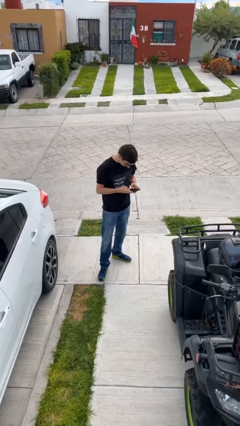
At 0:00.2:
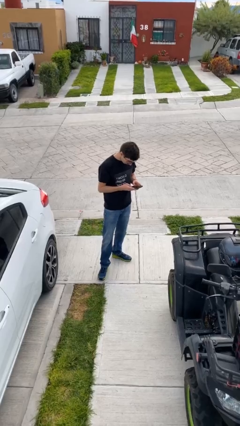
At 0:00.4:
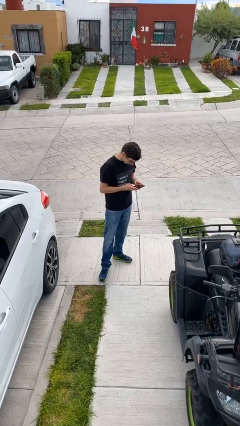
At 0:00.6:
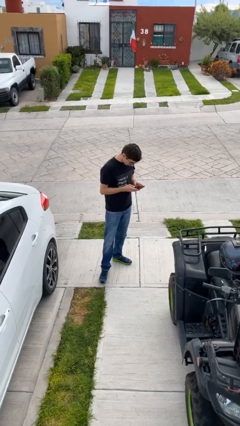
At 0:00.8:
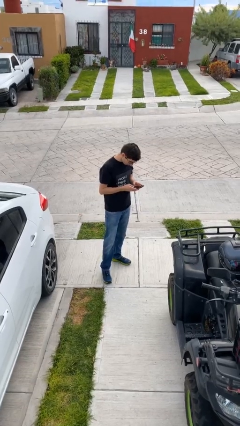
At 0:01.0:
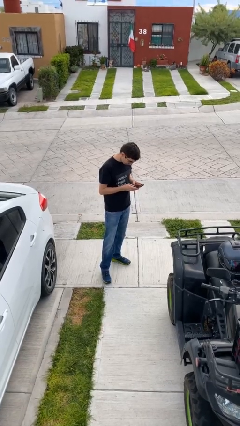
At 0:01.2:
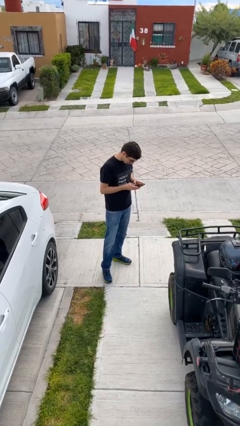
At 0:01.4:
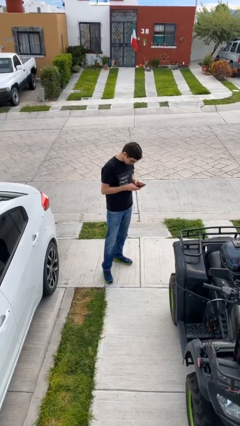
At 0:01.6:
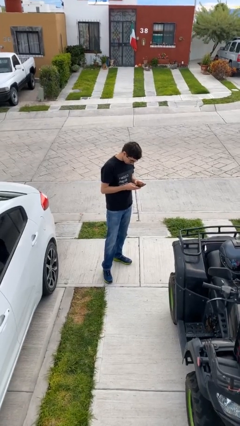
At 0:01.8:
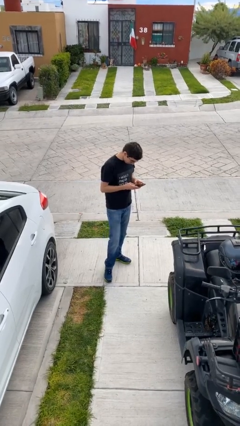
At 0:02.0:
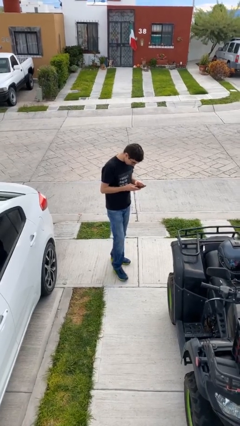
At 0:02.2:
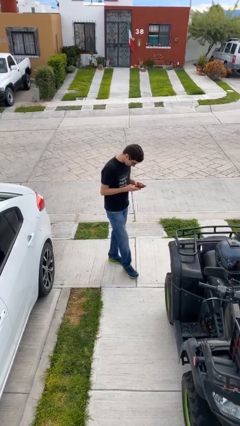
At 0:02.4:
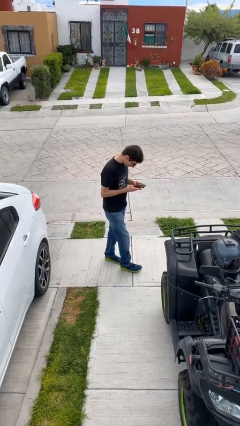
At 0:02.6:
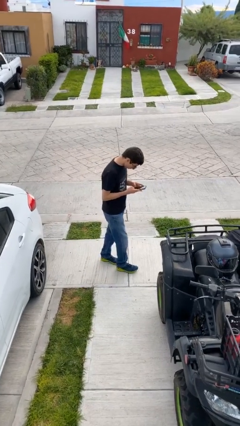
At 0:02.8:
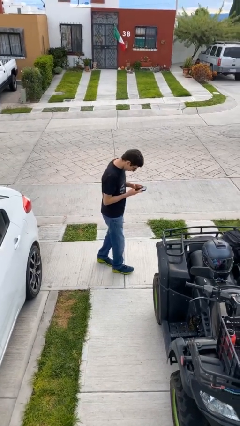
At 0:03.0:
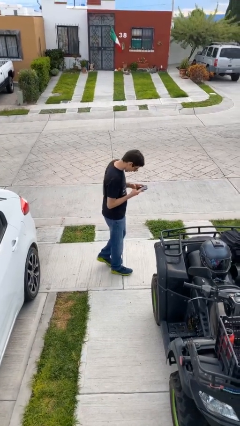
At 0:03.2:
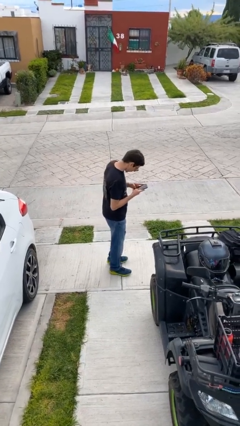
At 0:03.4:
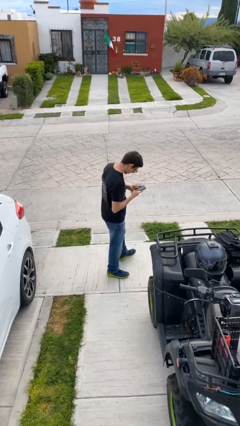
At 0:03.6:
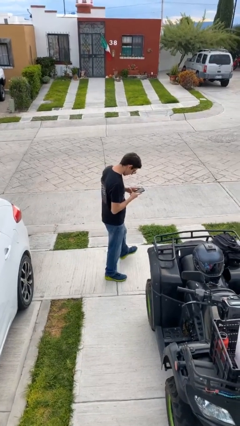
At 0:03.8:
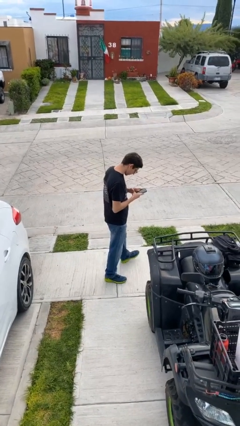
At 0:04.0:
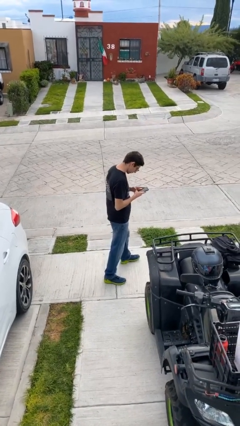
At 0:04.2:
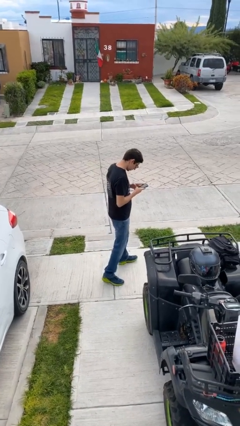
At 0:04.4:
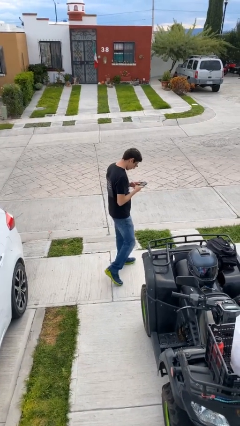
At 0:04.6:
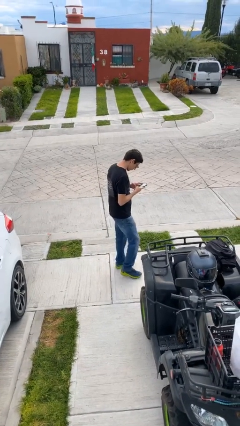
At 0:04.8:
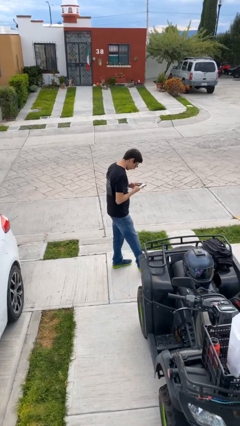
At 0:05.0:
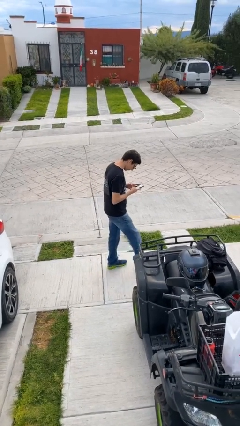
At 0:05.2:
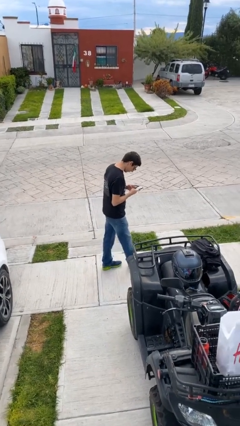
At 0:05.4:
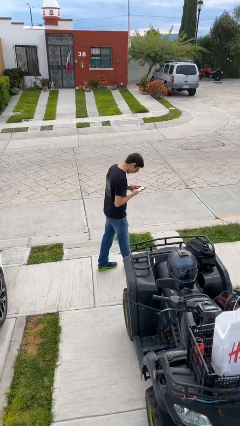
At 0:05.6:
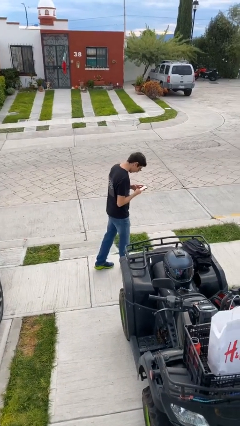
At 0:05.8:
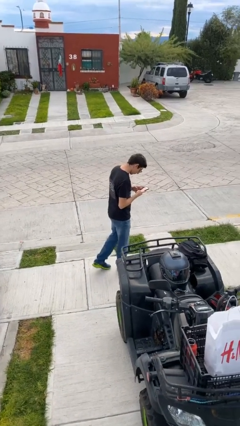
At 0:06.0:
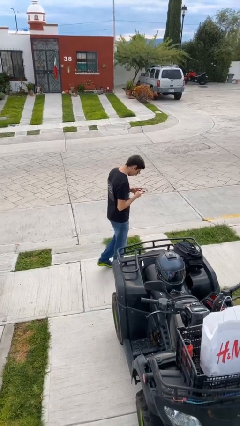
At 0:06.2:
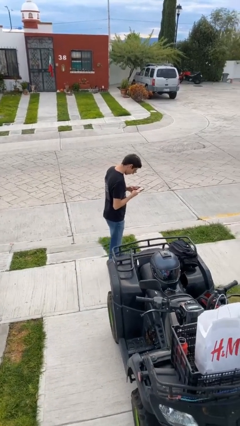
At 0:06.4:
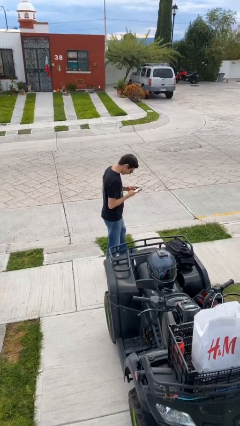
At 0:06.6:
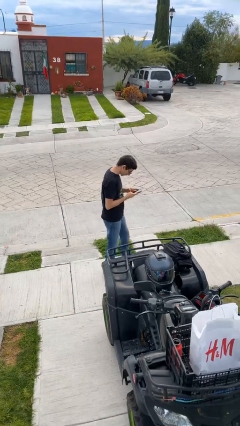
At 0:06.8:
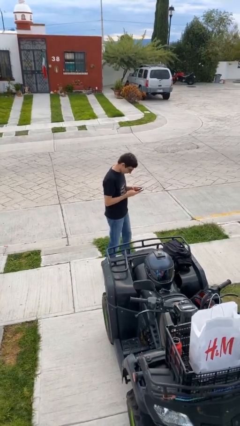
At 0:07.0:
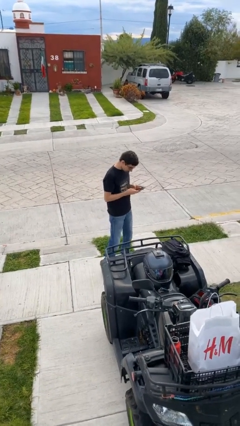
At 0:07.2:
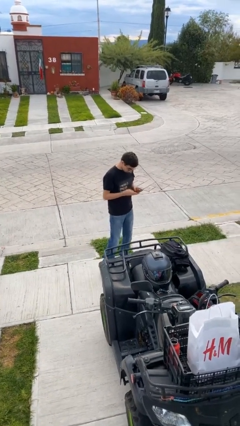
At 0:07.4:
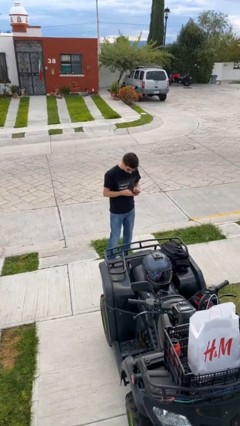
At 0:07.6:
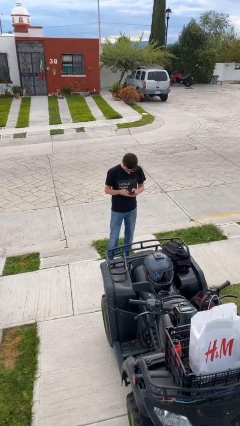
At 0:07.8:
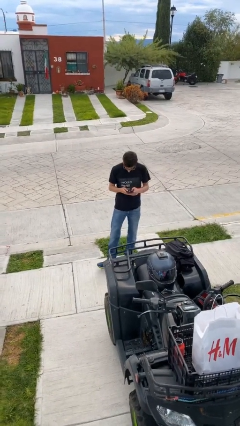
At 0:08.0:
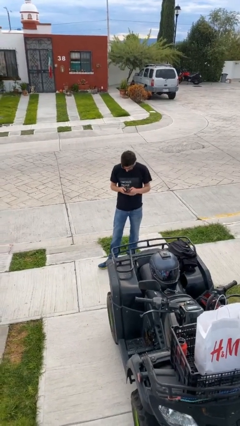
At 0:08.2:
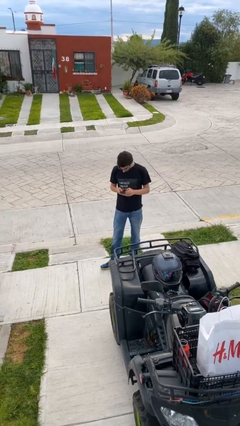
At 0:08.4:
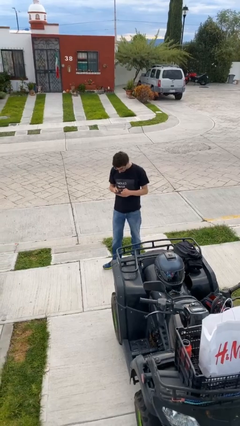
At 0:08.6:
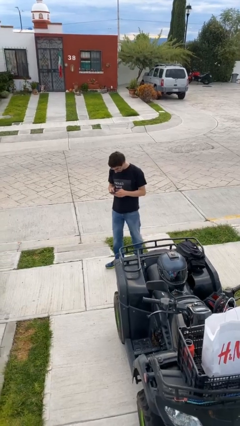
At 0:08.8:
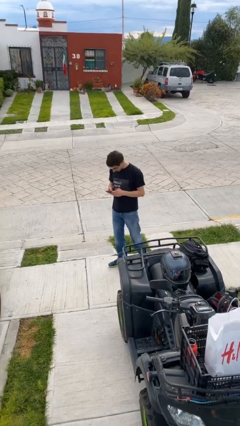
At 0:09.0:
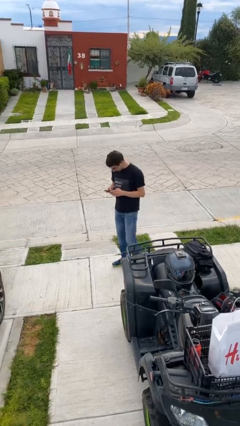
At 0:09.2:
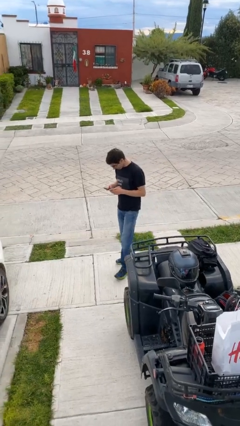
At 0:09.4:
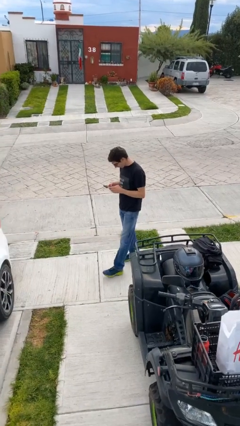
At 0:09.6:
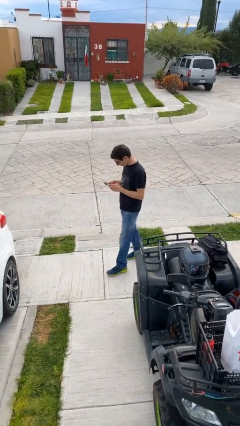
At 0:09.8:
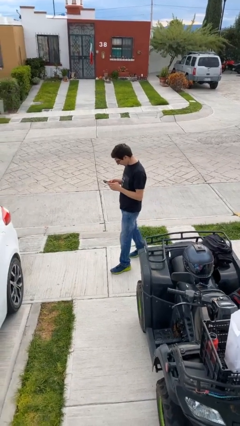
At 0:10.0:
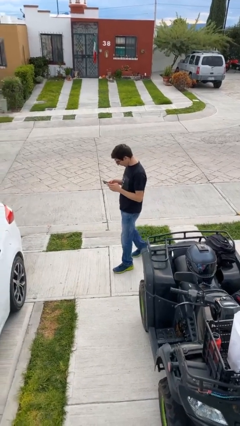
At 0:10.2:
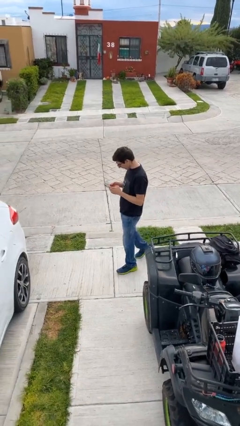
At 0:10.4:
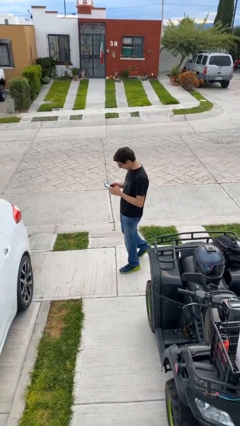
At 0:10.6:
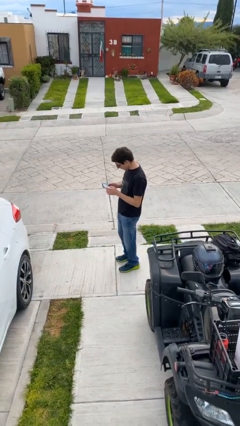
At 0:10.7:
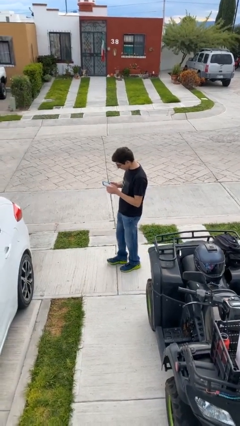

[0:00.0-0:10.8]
person texts on phone

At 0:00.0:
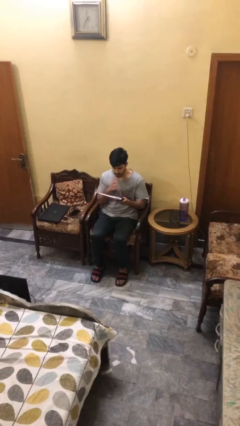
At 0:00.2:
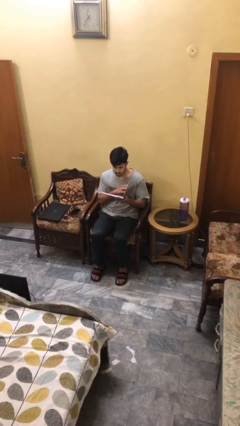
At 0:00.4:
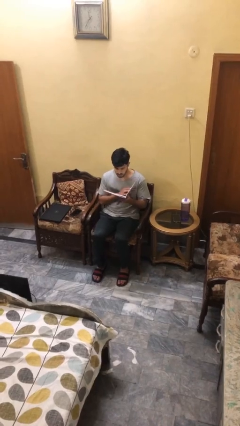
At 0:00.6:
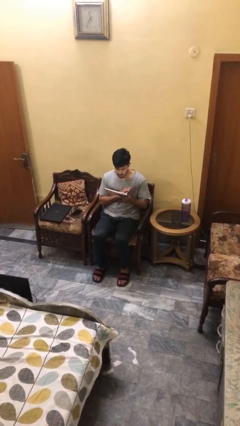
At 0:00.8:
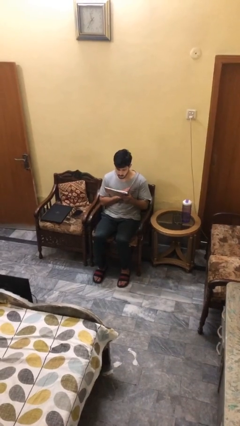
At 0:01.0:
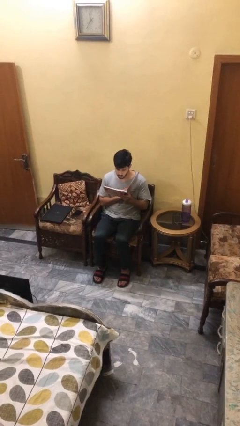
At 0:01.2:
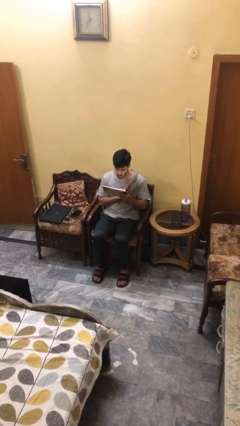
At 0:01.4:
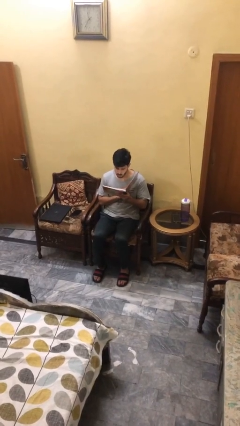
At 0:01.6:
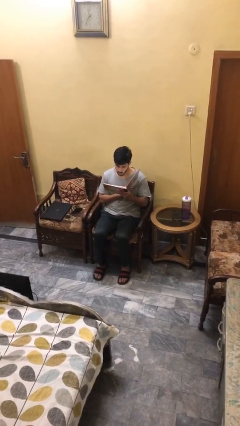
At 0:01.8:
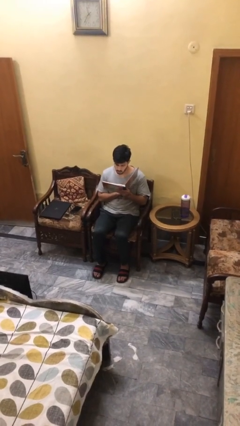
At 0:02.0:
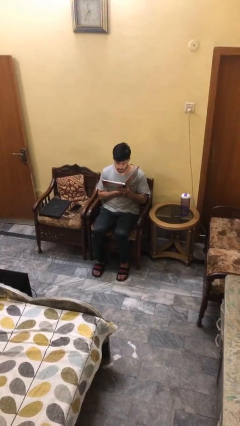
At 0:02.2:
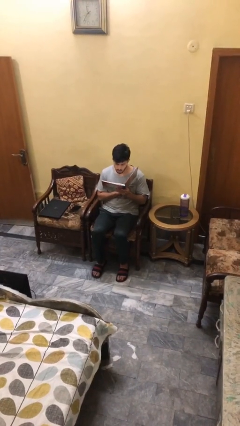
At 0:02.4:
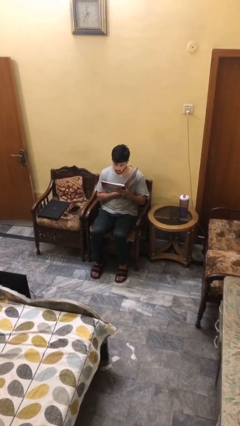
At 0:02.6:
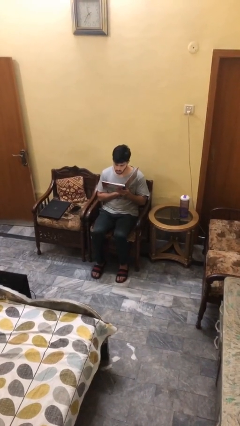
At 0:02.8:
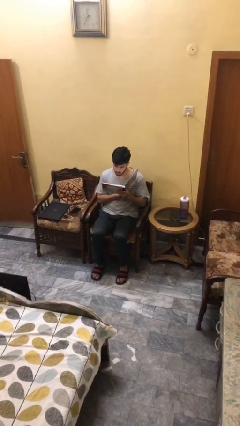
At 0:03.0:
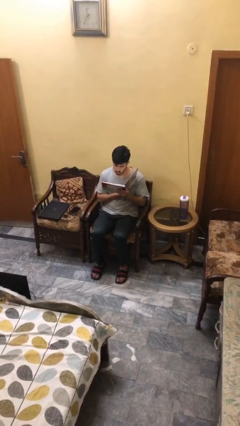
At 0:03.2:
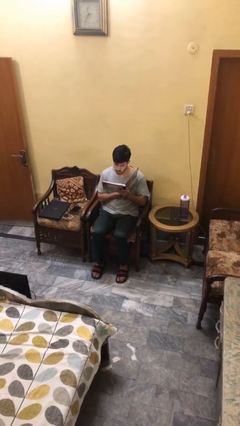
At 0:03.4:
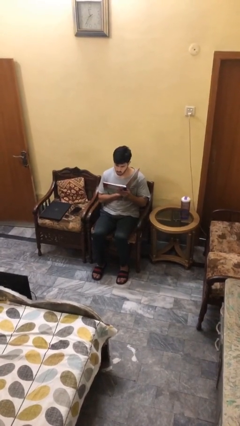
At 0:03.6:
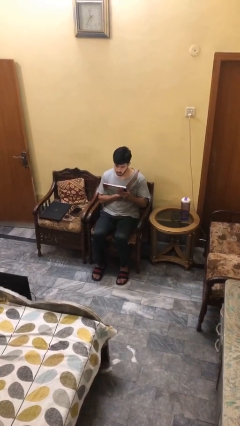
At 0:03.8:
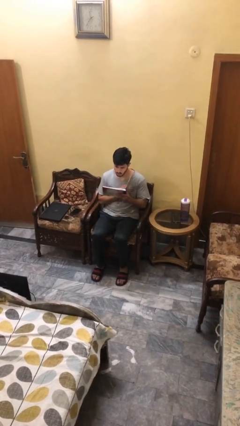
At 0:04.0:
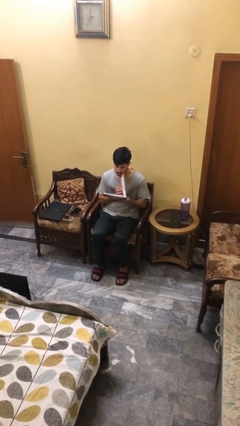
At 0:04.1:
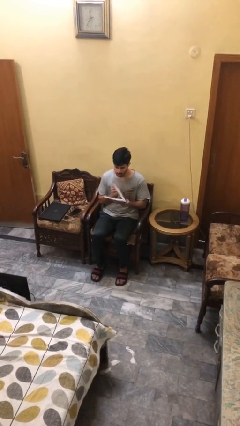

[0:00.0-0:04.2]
person reads document

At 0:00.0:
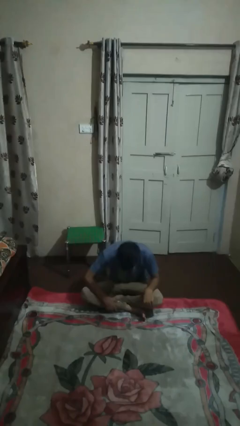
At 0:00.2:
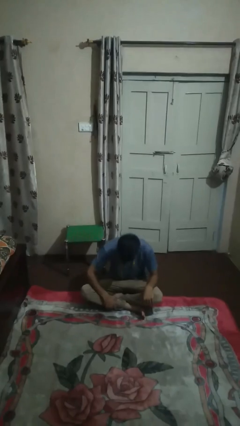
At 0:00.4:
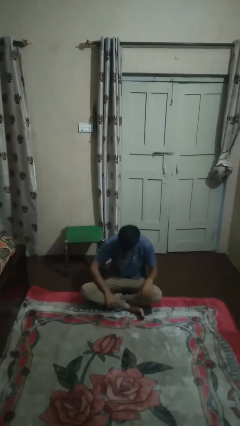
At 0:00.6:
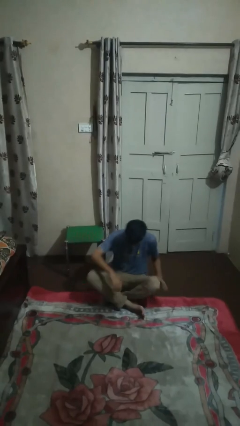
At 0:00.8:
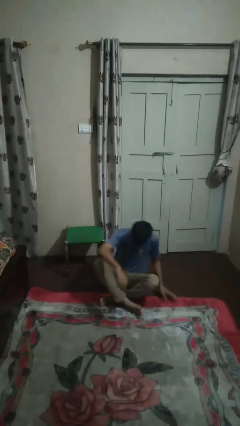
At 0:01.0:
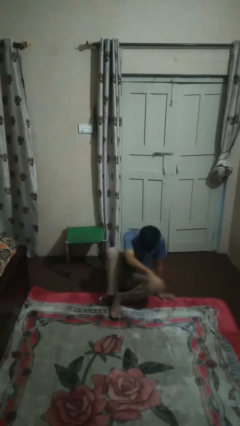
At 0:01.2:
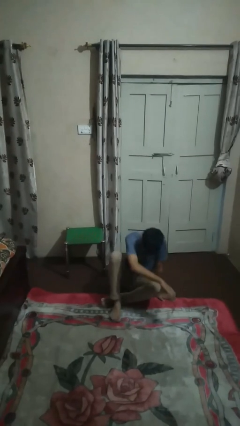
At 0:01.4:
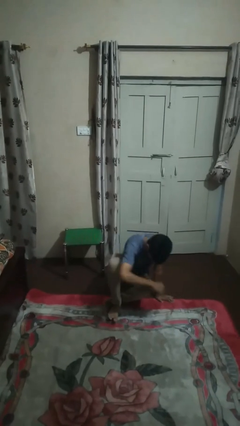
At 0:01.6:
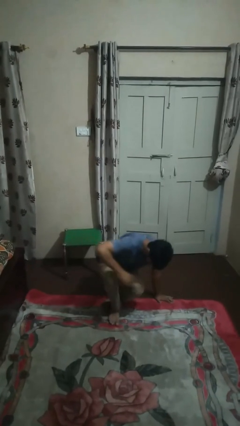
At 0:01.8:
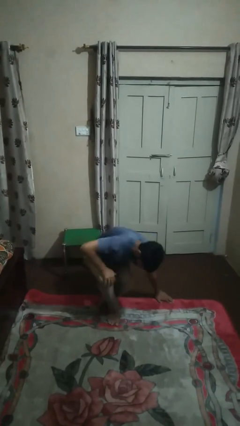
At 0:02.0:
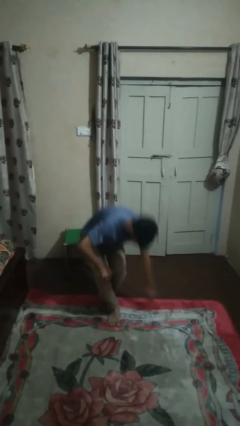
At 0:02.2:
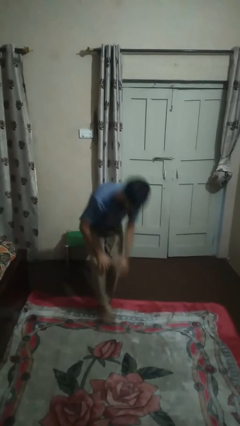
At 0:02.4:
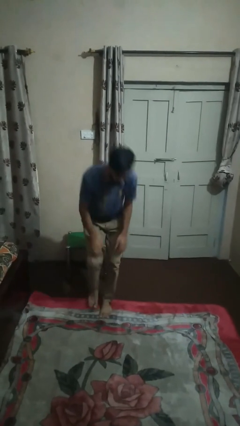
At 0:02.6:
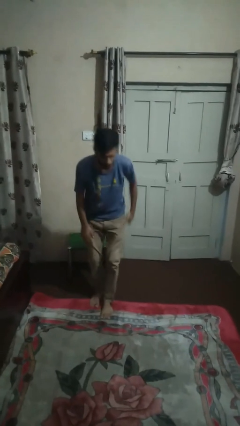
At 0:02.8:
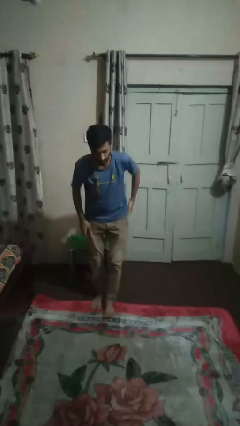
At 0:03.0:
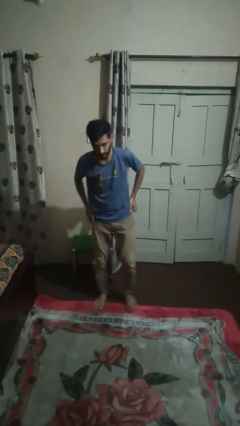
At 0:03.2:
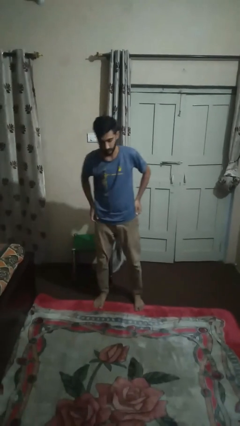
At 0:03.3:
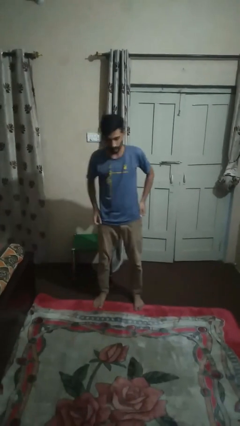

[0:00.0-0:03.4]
person stands up from floor
